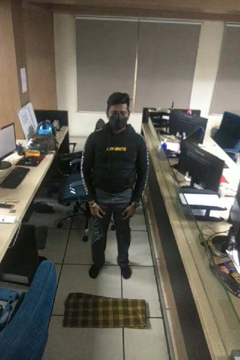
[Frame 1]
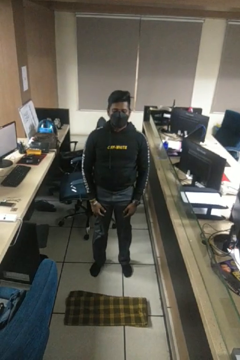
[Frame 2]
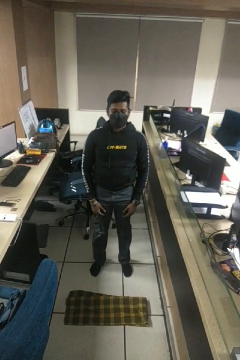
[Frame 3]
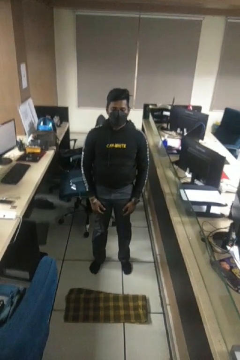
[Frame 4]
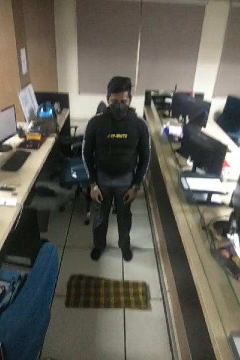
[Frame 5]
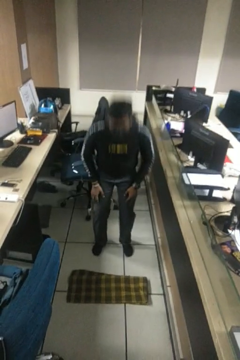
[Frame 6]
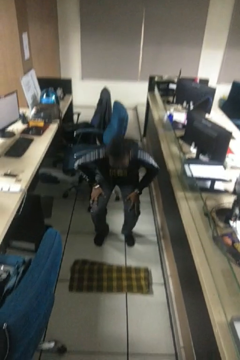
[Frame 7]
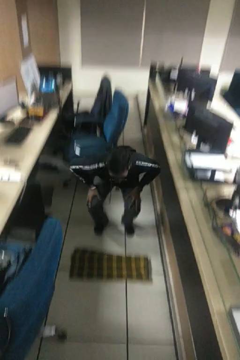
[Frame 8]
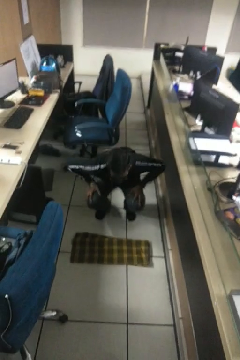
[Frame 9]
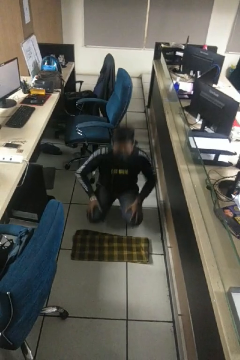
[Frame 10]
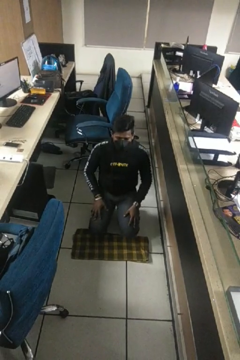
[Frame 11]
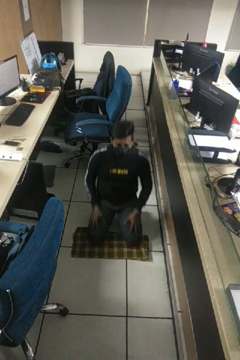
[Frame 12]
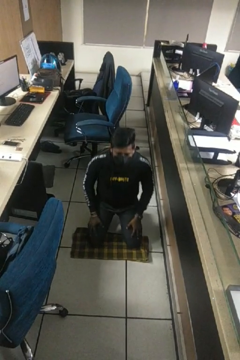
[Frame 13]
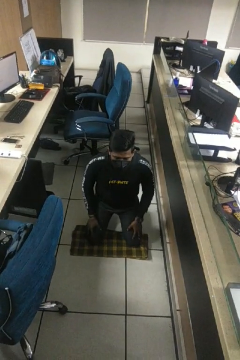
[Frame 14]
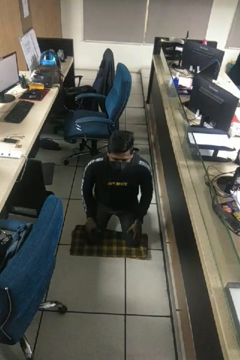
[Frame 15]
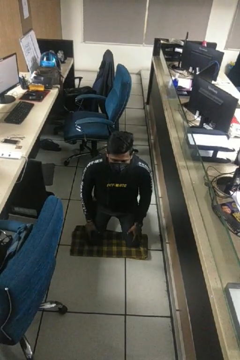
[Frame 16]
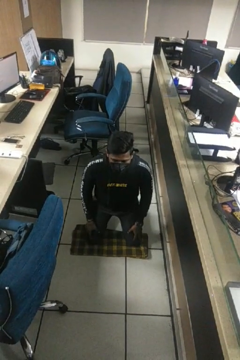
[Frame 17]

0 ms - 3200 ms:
person kneels

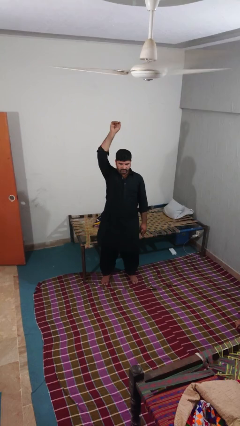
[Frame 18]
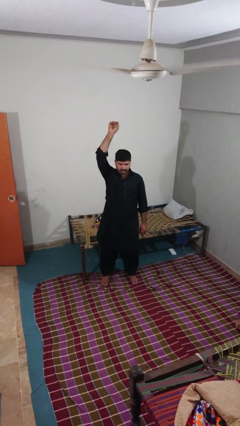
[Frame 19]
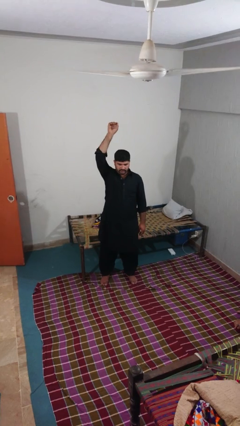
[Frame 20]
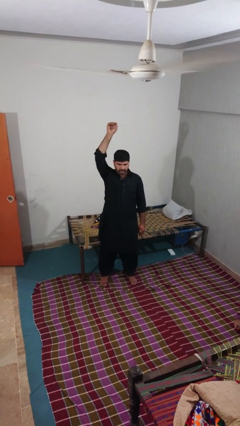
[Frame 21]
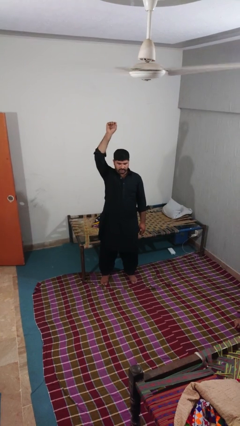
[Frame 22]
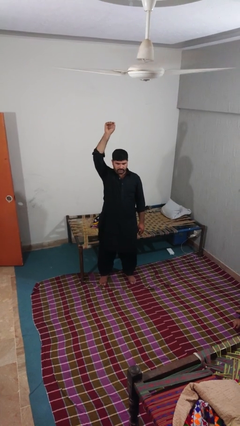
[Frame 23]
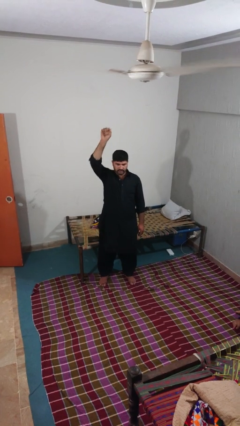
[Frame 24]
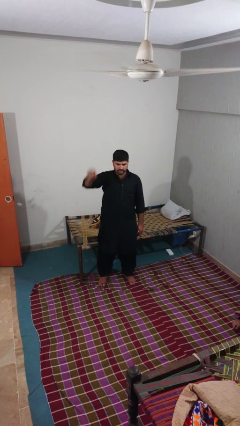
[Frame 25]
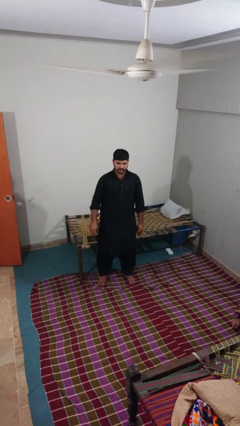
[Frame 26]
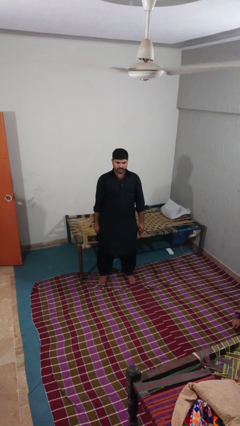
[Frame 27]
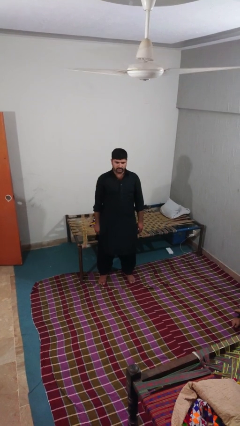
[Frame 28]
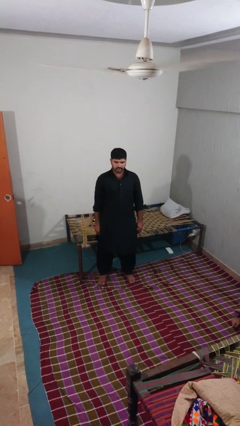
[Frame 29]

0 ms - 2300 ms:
person gestures lower hand

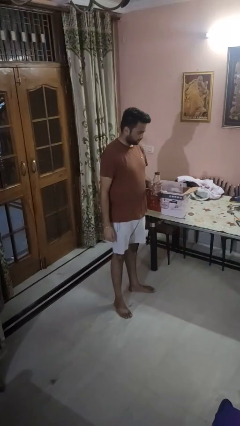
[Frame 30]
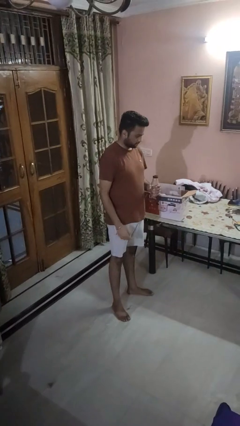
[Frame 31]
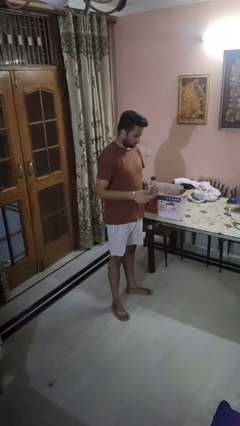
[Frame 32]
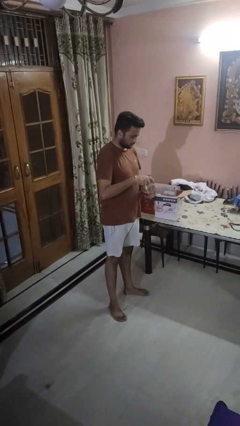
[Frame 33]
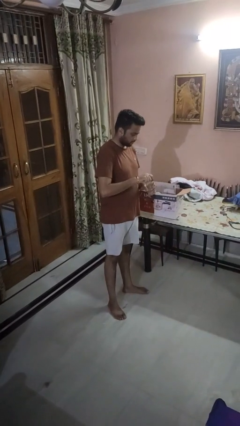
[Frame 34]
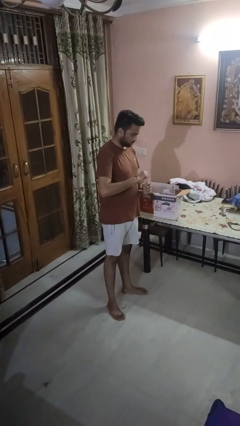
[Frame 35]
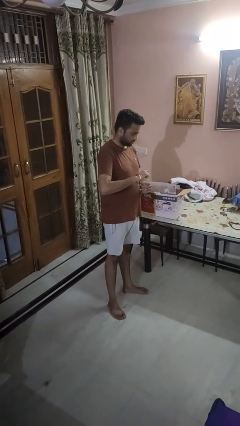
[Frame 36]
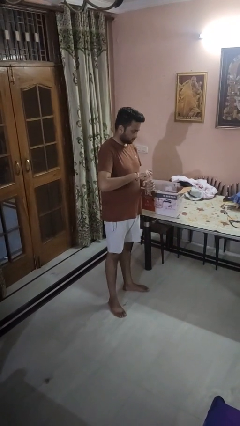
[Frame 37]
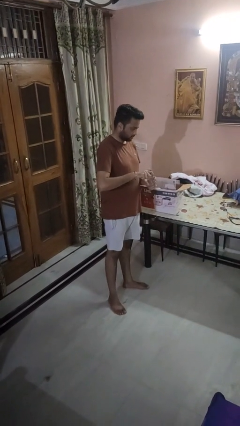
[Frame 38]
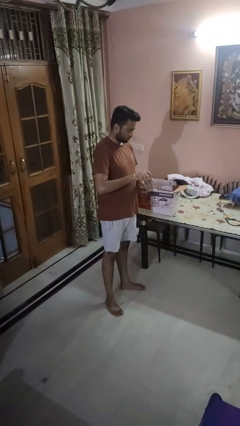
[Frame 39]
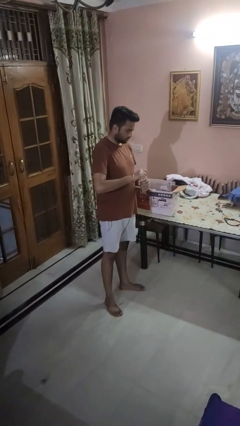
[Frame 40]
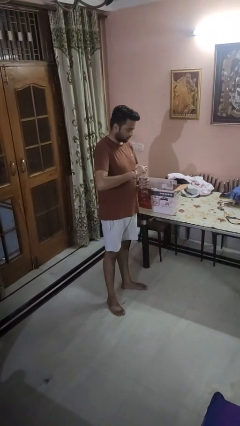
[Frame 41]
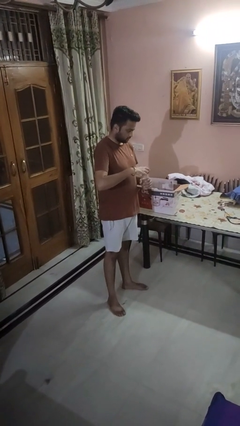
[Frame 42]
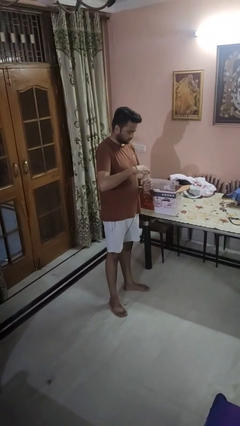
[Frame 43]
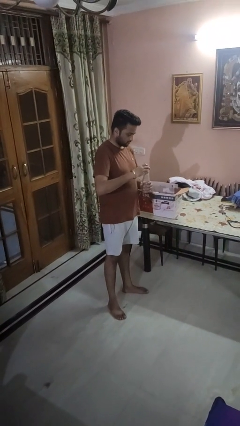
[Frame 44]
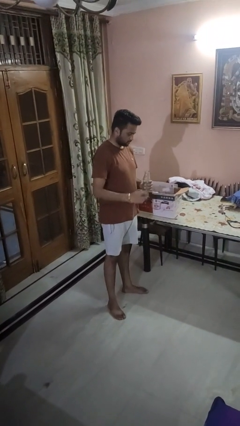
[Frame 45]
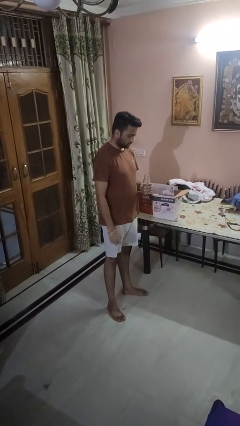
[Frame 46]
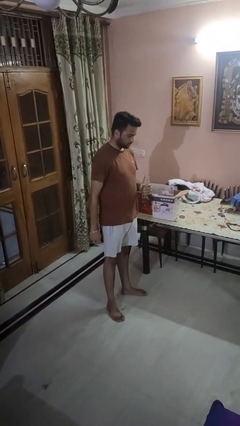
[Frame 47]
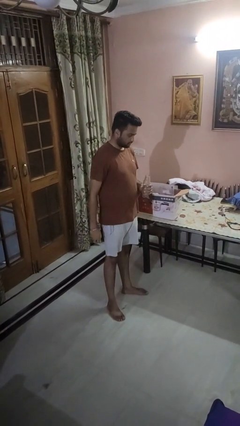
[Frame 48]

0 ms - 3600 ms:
person unscrews lid from bottle

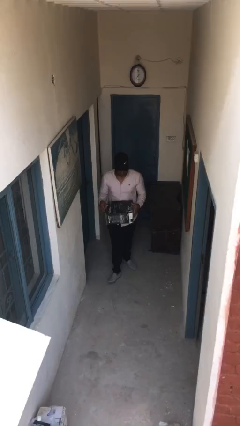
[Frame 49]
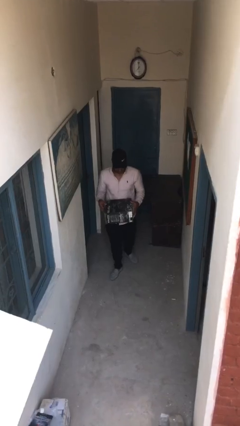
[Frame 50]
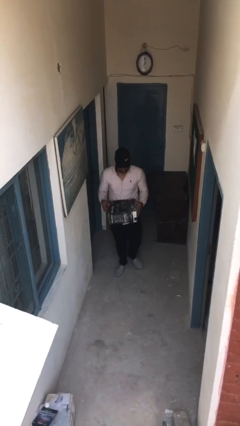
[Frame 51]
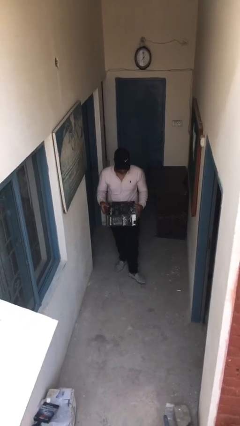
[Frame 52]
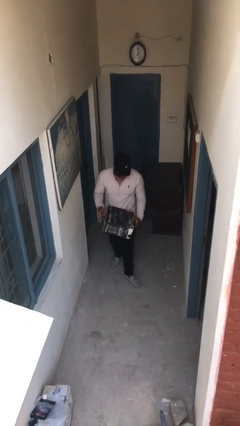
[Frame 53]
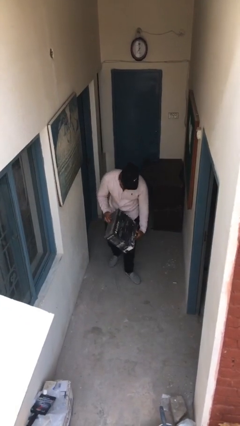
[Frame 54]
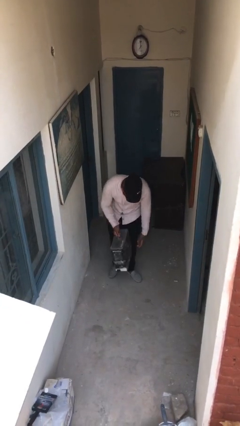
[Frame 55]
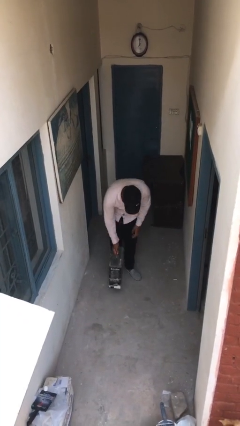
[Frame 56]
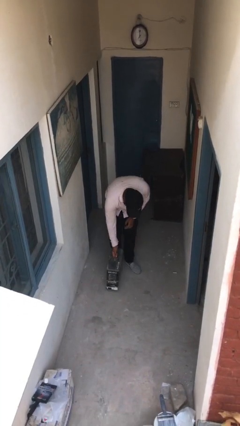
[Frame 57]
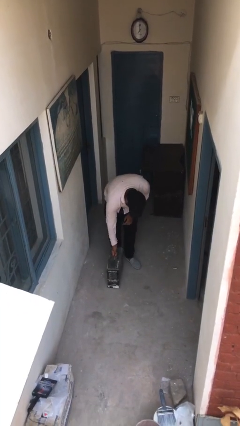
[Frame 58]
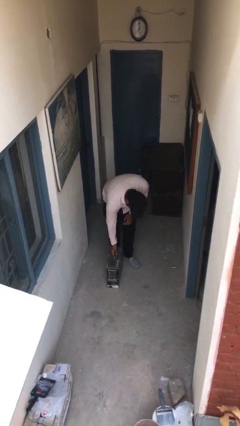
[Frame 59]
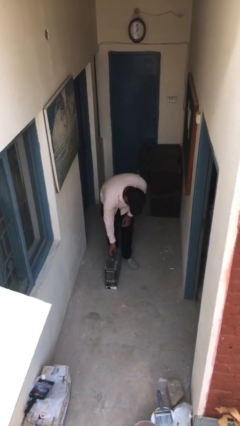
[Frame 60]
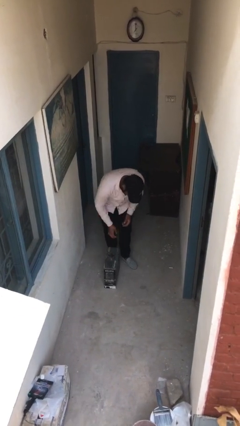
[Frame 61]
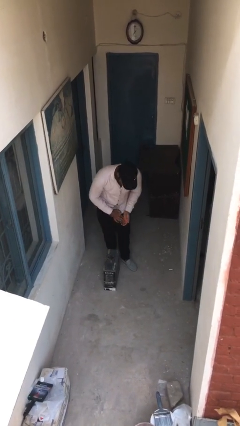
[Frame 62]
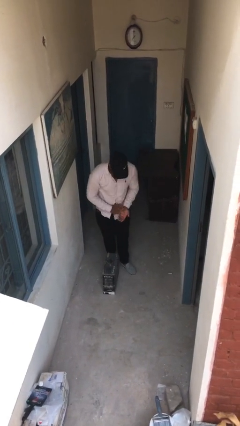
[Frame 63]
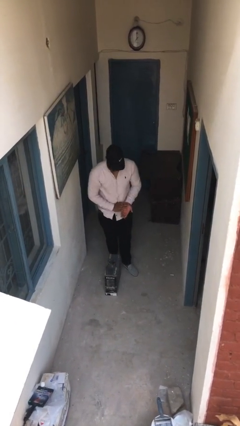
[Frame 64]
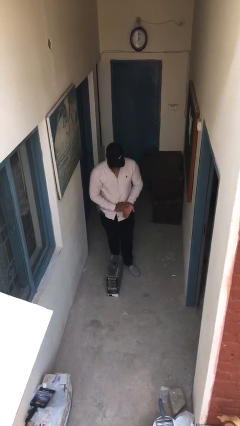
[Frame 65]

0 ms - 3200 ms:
person puts down object on floor

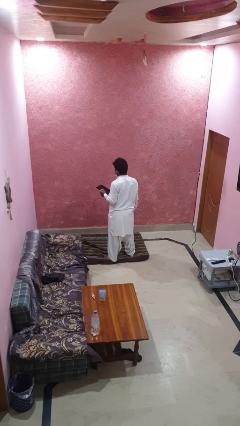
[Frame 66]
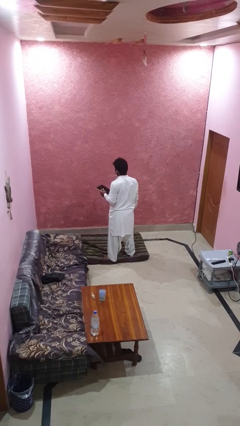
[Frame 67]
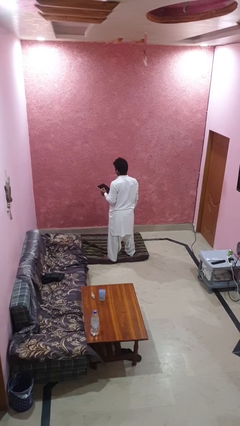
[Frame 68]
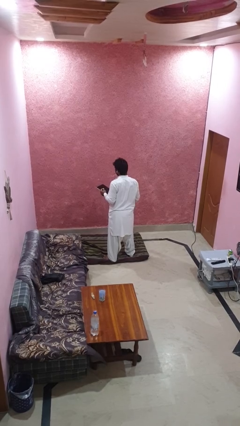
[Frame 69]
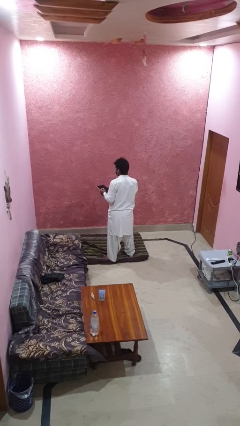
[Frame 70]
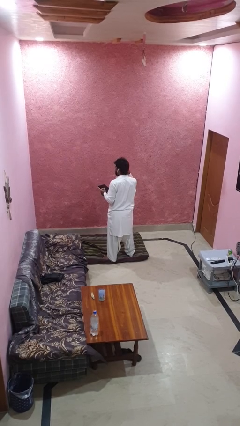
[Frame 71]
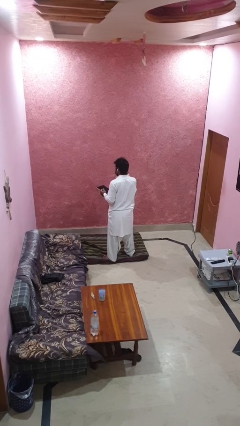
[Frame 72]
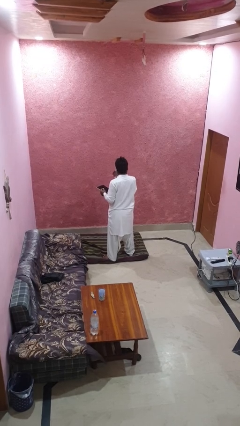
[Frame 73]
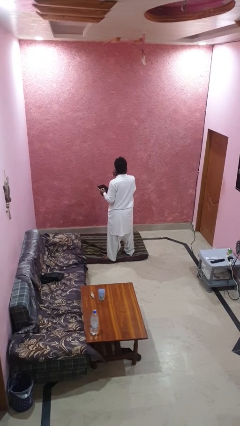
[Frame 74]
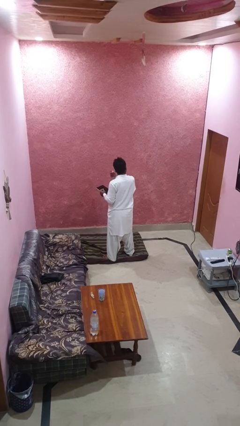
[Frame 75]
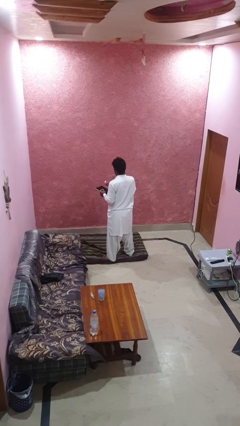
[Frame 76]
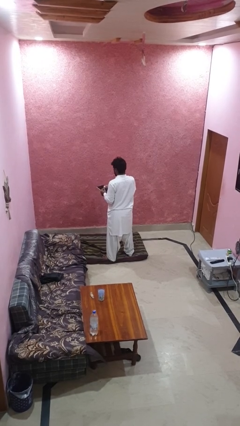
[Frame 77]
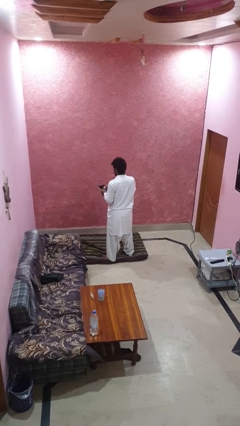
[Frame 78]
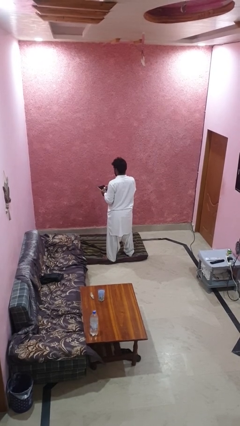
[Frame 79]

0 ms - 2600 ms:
person takes off headphones

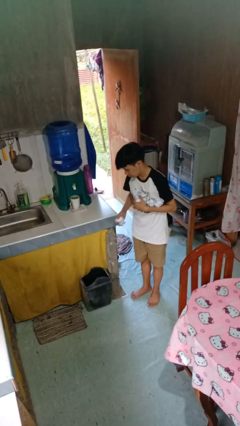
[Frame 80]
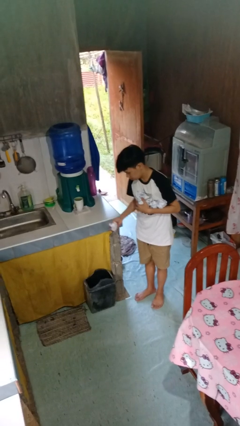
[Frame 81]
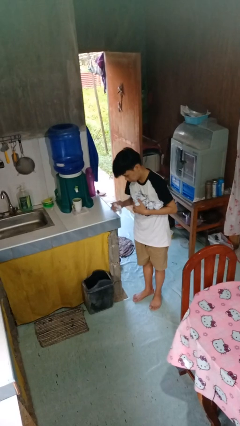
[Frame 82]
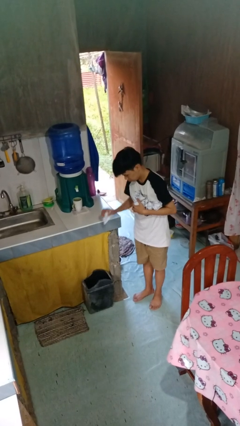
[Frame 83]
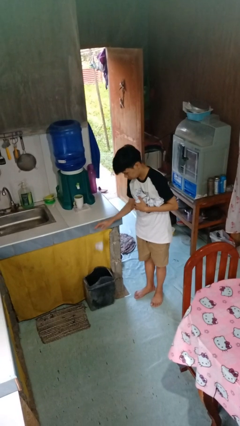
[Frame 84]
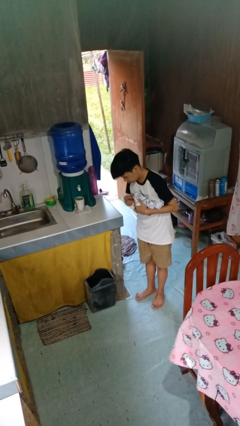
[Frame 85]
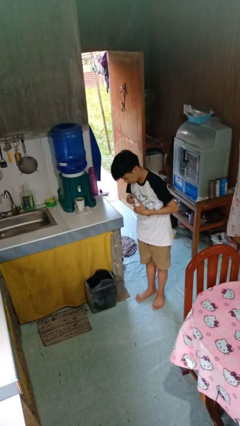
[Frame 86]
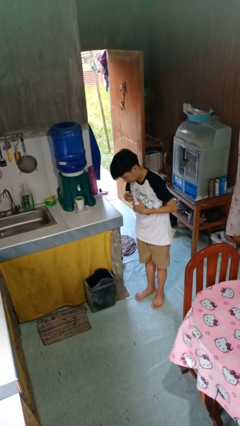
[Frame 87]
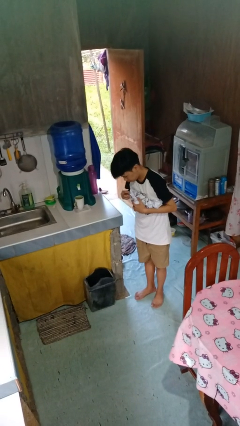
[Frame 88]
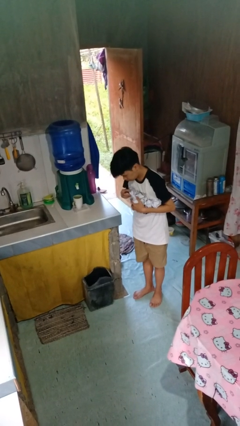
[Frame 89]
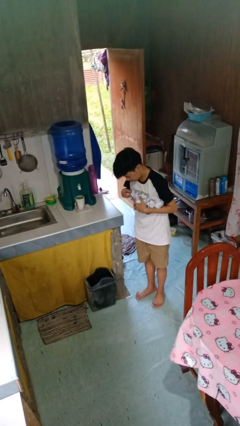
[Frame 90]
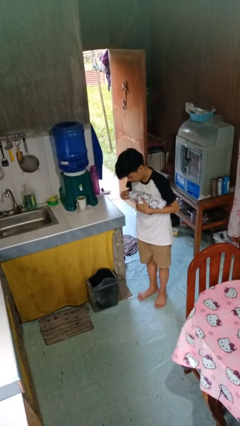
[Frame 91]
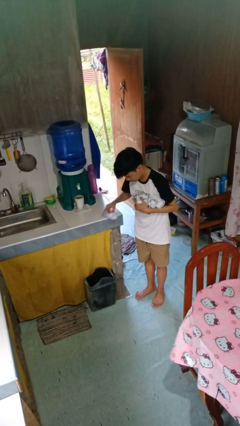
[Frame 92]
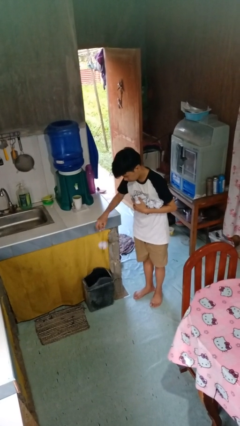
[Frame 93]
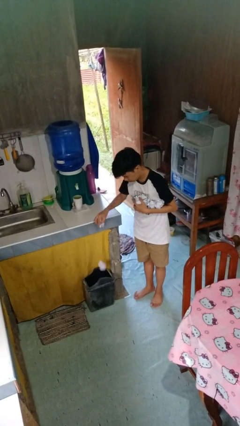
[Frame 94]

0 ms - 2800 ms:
person discards trash

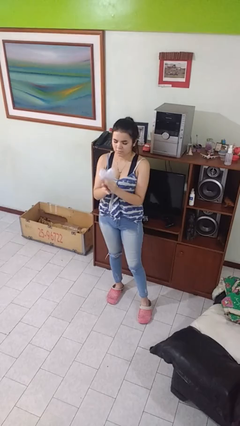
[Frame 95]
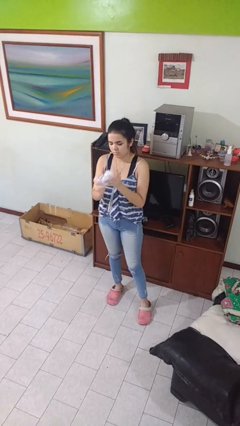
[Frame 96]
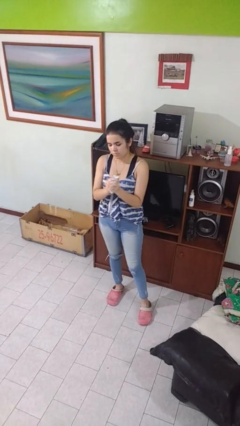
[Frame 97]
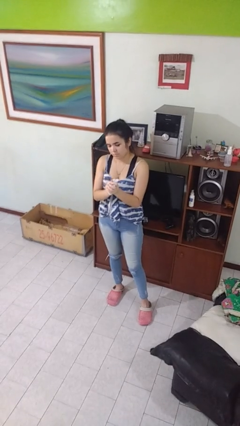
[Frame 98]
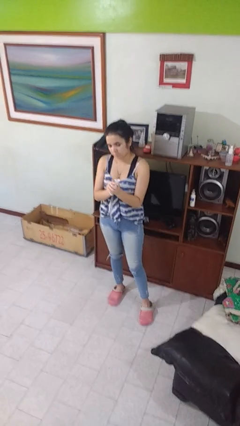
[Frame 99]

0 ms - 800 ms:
person crumples paper
